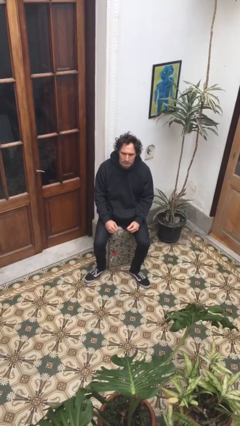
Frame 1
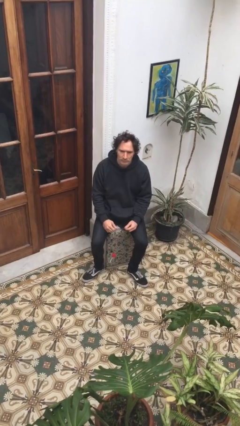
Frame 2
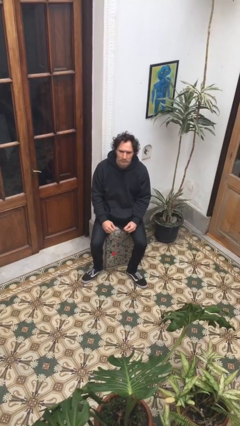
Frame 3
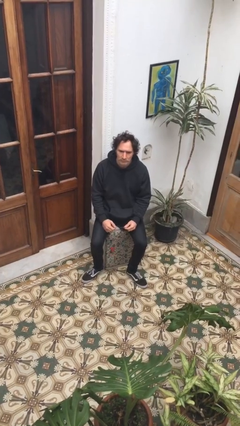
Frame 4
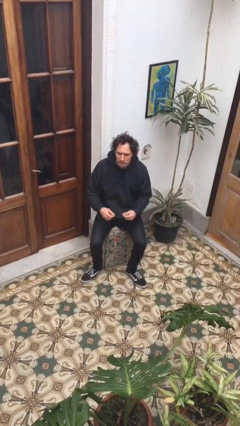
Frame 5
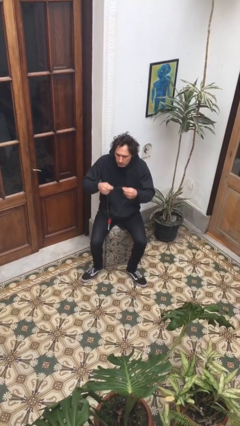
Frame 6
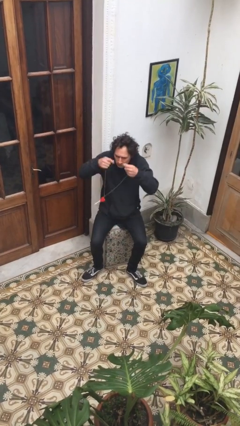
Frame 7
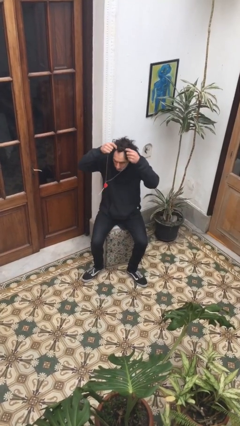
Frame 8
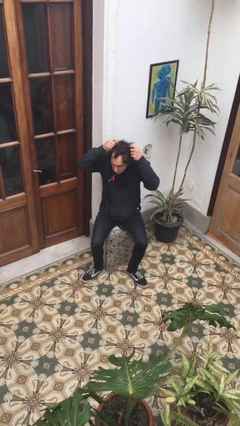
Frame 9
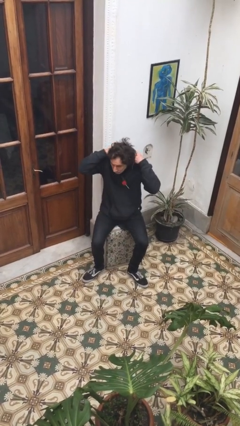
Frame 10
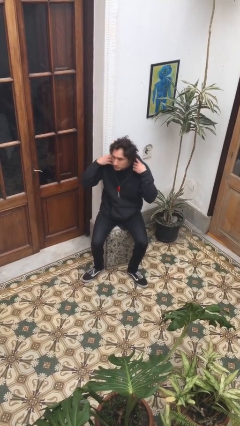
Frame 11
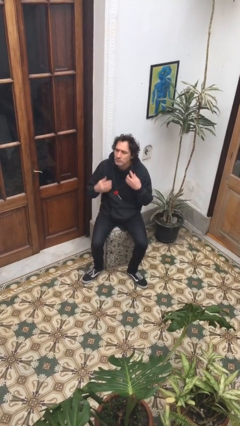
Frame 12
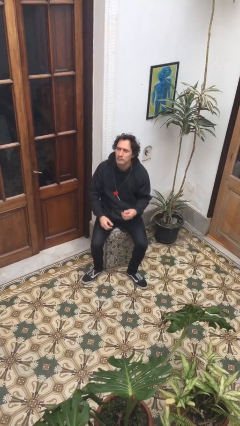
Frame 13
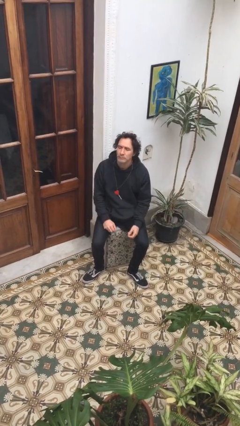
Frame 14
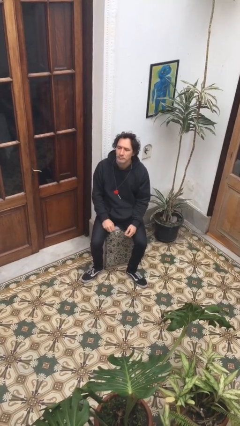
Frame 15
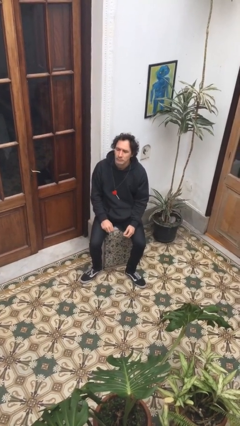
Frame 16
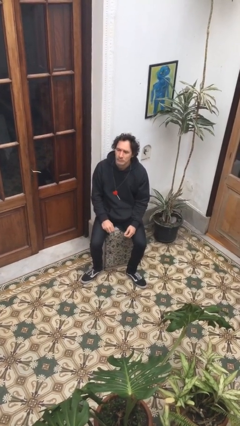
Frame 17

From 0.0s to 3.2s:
person puts on necklace

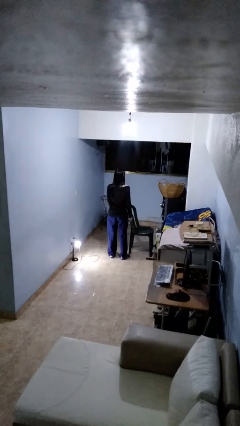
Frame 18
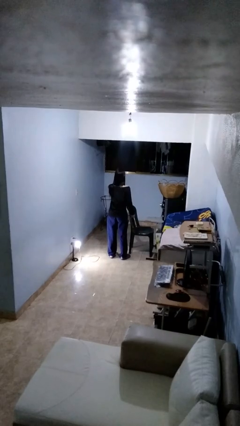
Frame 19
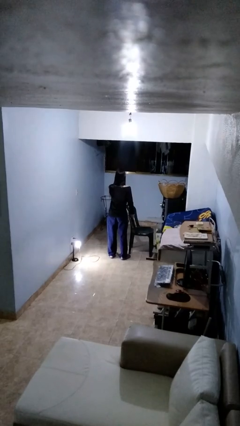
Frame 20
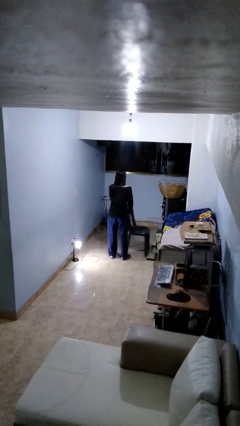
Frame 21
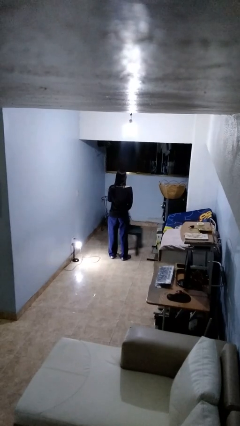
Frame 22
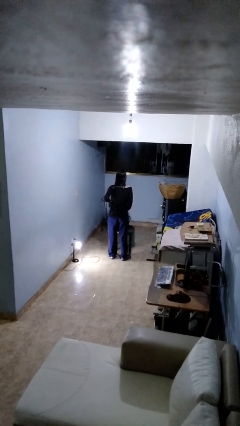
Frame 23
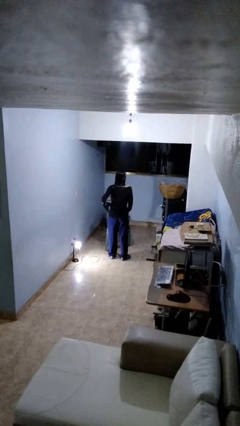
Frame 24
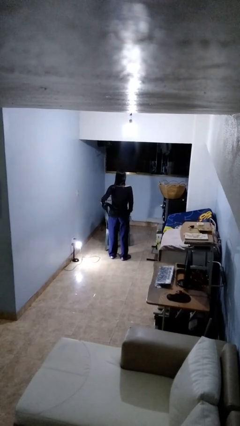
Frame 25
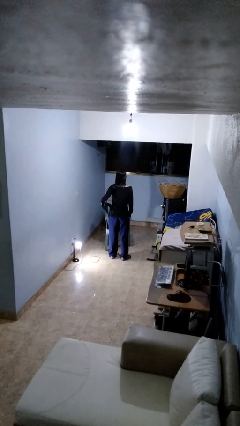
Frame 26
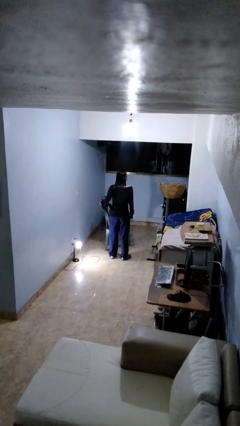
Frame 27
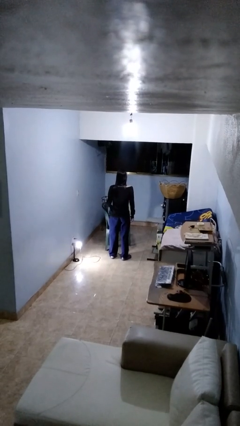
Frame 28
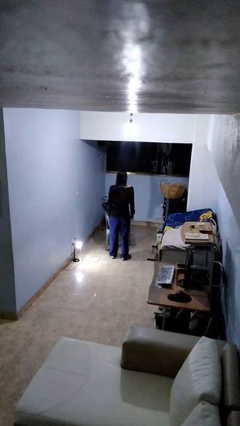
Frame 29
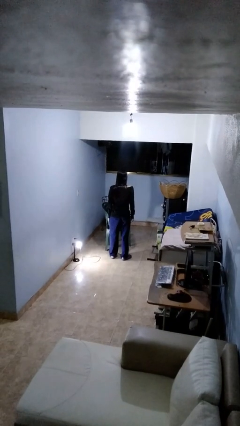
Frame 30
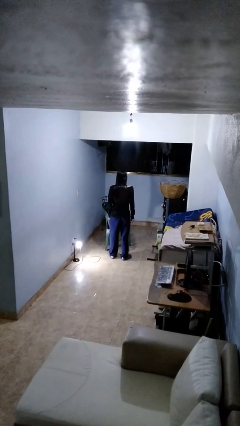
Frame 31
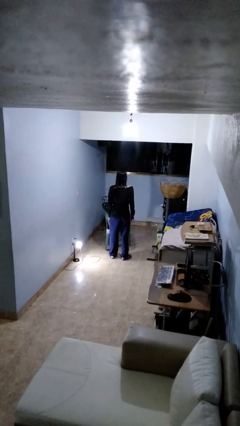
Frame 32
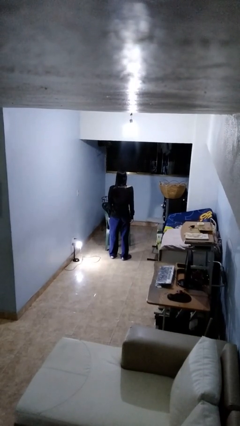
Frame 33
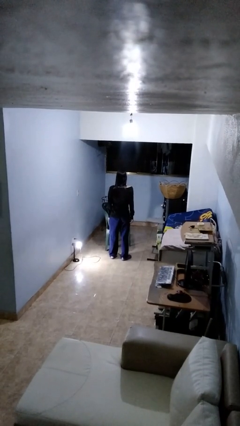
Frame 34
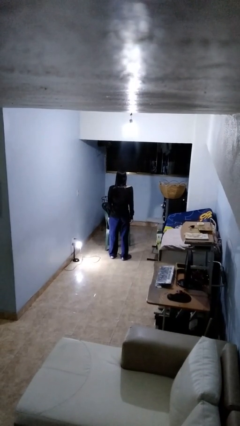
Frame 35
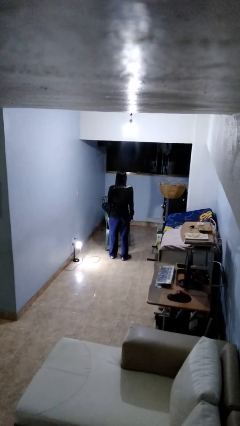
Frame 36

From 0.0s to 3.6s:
person pulls out chair

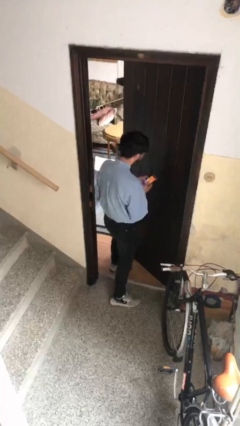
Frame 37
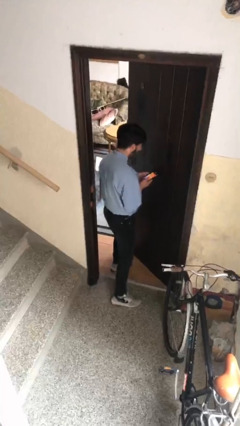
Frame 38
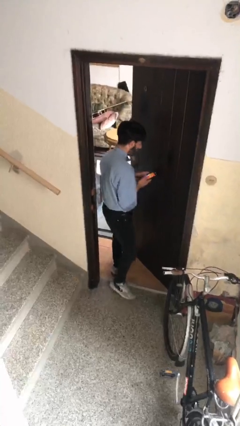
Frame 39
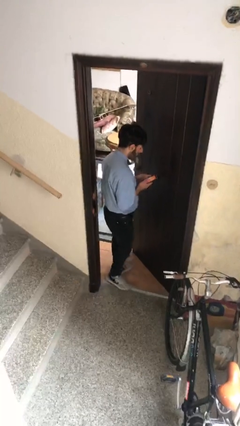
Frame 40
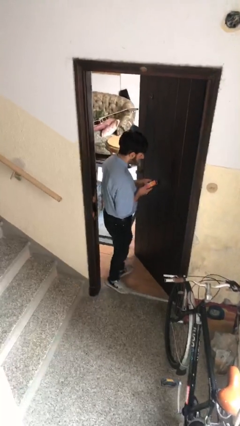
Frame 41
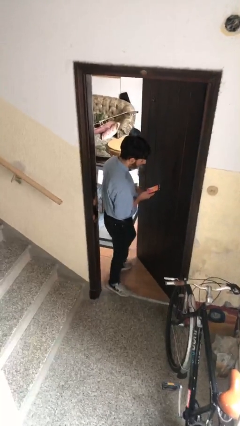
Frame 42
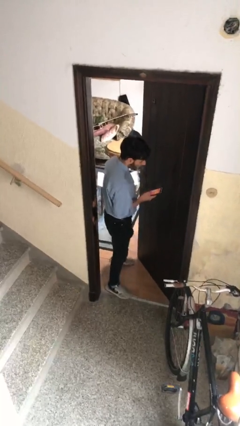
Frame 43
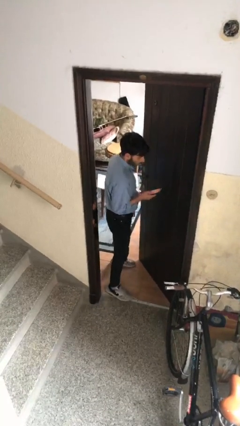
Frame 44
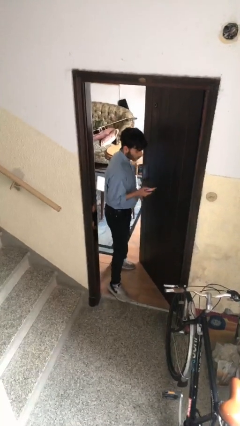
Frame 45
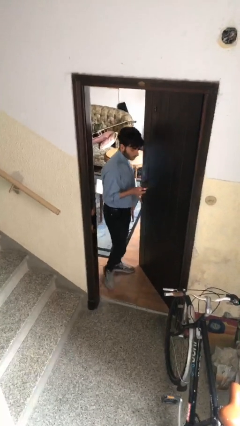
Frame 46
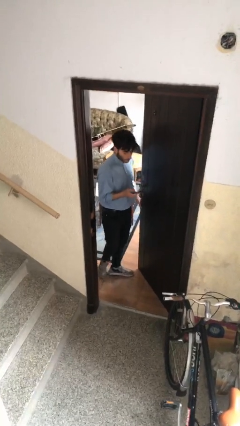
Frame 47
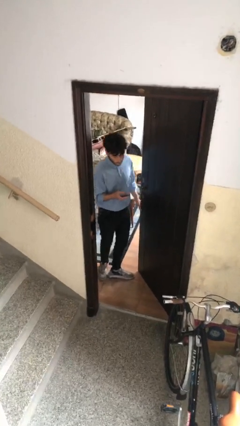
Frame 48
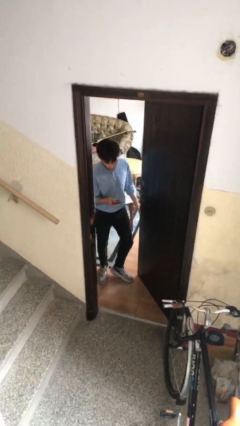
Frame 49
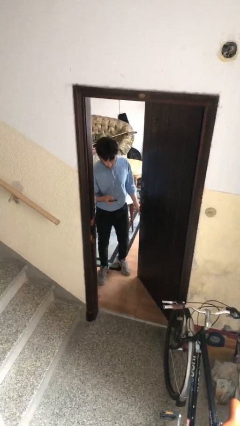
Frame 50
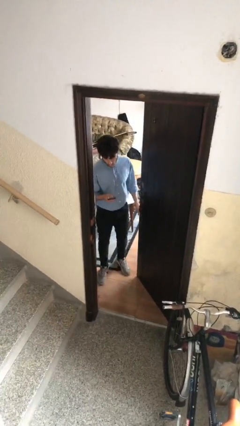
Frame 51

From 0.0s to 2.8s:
person exits scene through structure

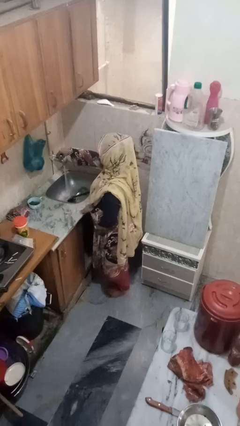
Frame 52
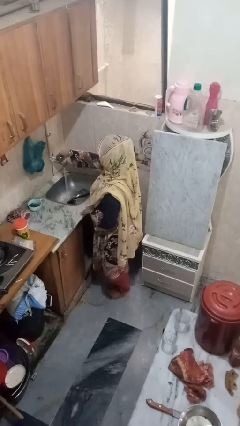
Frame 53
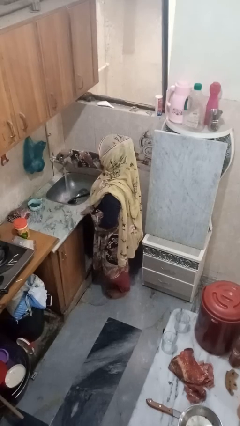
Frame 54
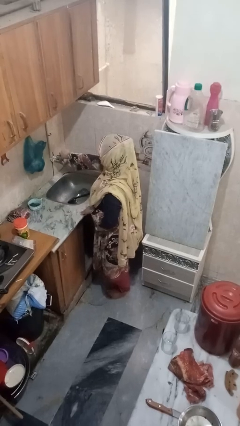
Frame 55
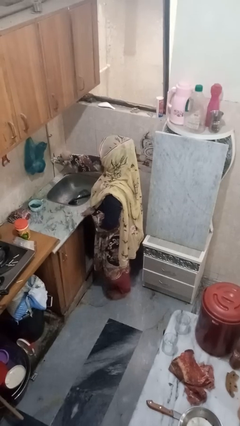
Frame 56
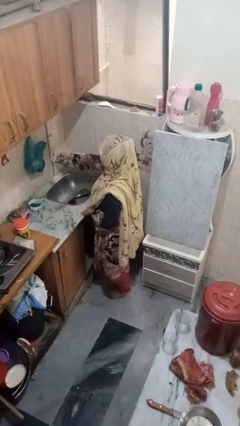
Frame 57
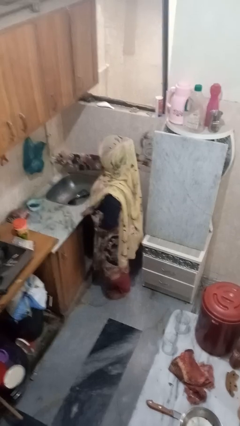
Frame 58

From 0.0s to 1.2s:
person turns off faucet

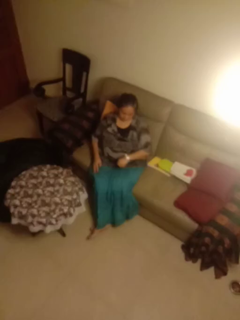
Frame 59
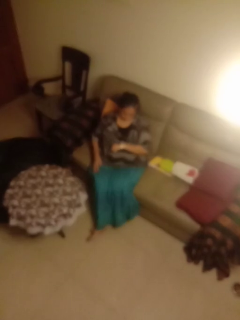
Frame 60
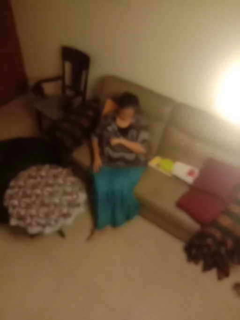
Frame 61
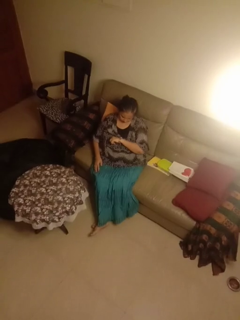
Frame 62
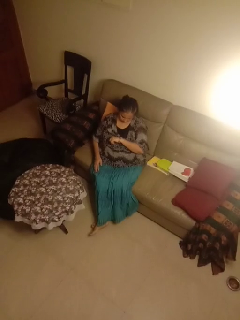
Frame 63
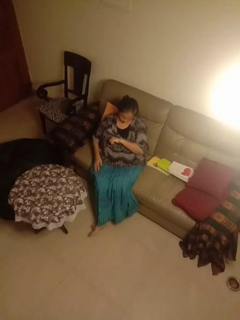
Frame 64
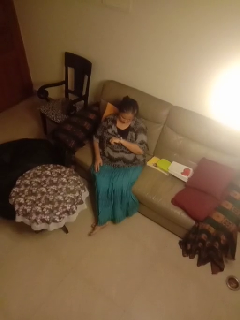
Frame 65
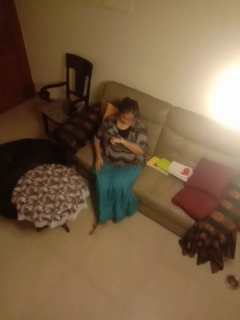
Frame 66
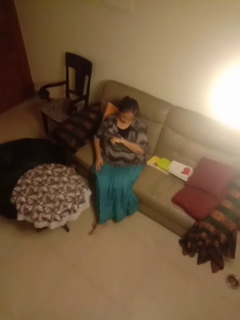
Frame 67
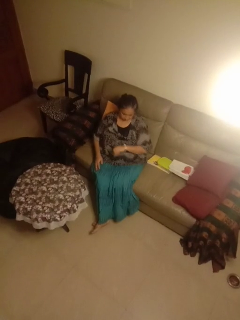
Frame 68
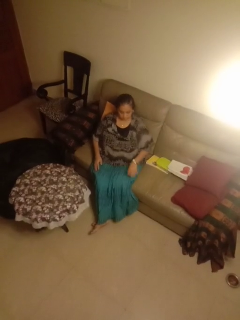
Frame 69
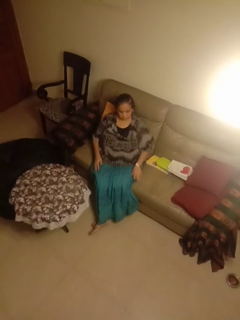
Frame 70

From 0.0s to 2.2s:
person looks at wristwatch

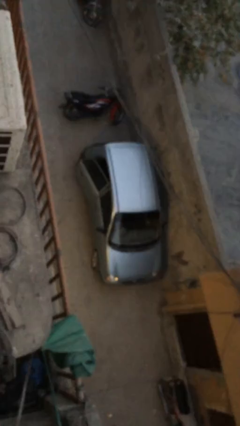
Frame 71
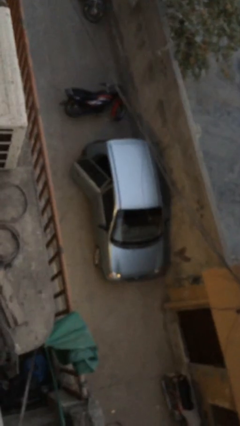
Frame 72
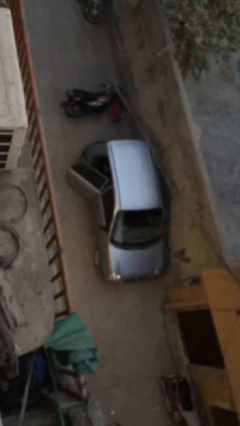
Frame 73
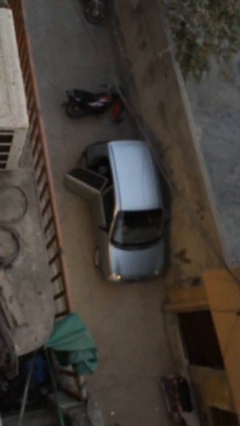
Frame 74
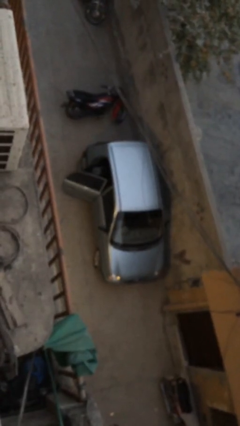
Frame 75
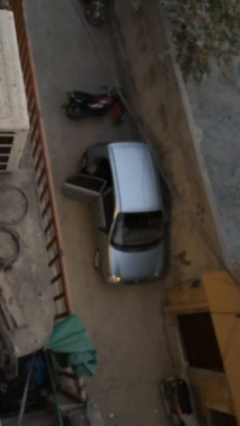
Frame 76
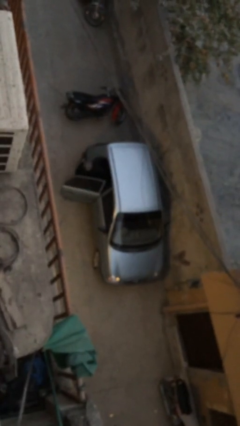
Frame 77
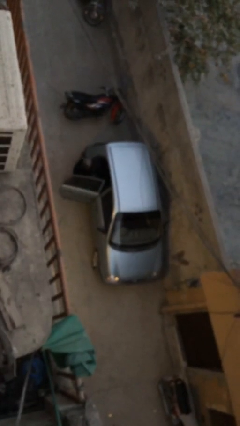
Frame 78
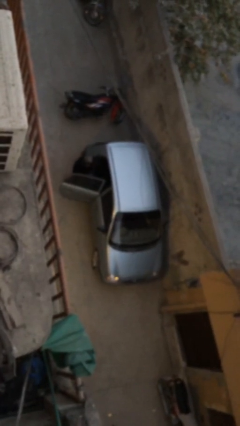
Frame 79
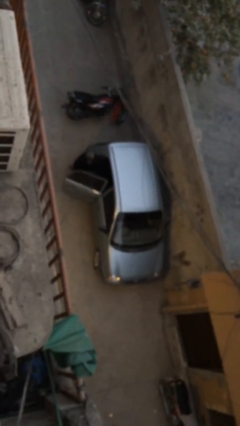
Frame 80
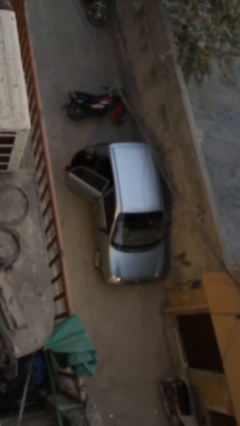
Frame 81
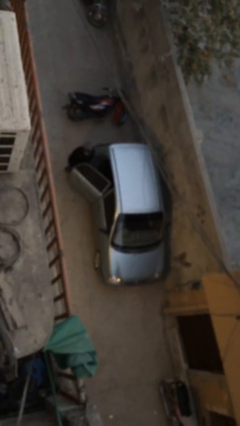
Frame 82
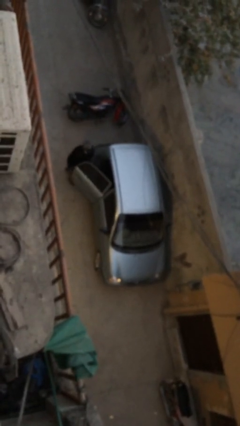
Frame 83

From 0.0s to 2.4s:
car drops off person

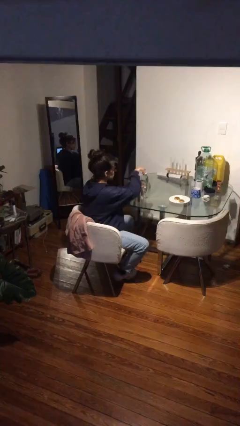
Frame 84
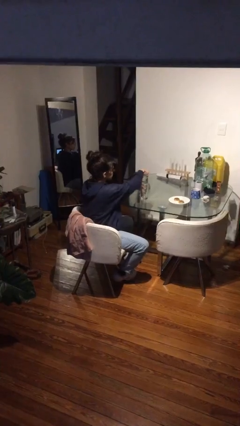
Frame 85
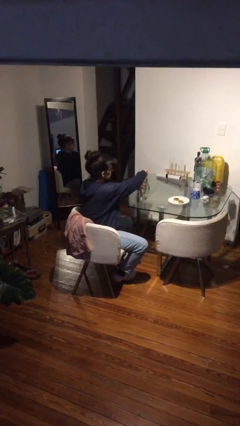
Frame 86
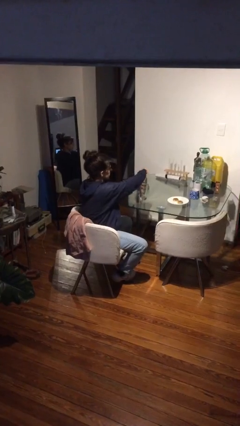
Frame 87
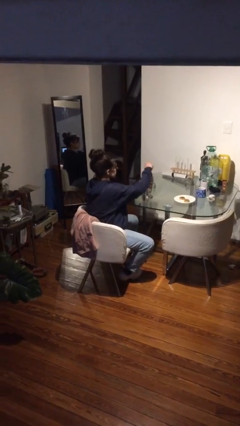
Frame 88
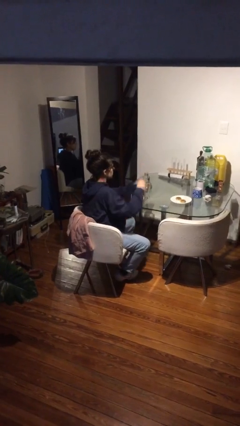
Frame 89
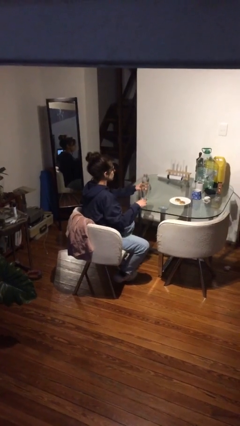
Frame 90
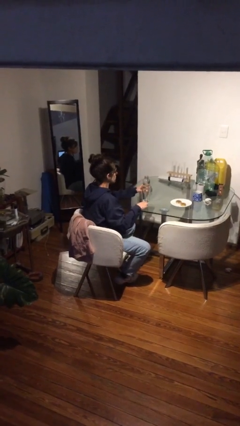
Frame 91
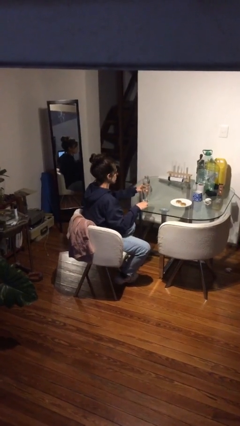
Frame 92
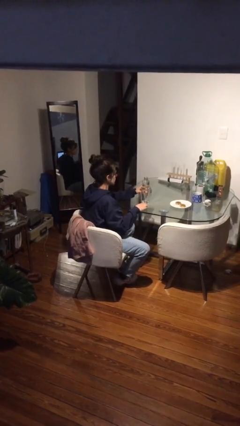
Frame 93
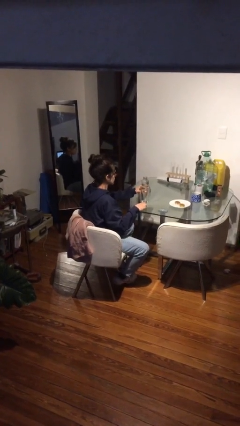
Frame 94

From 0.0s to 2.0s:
person unscrews lid from bottle

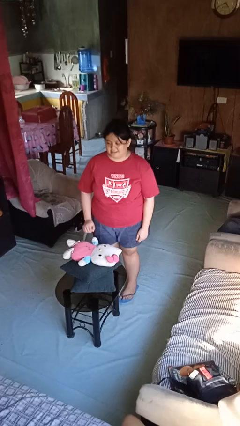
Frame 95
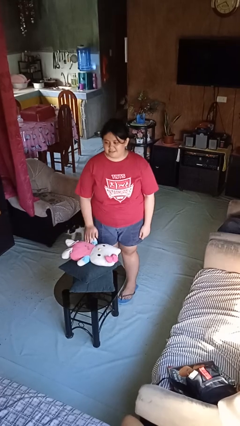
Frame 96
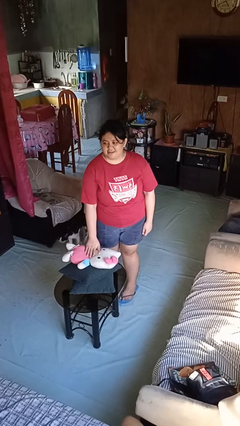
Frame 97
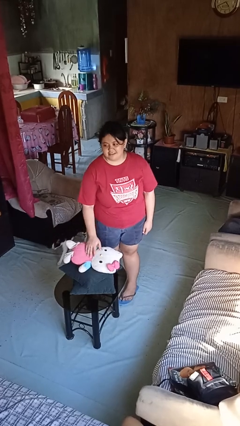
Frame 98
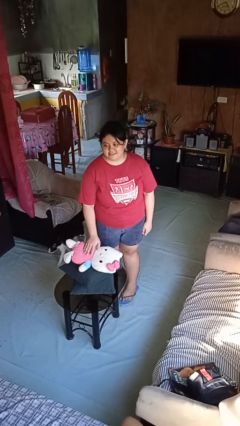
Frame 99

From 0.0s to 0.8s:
person taps object with finger
